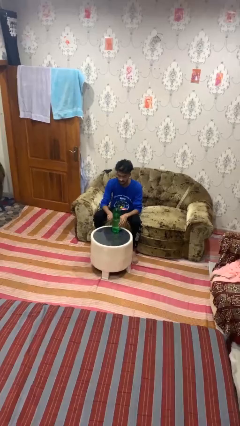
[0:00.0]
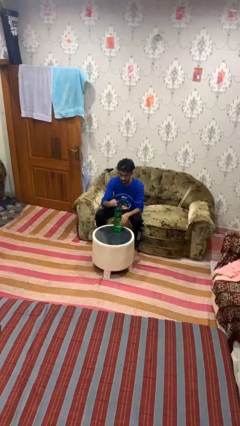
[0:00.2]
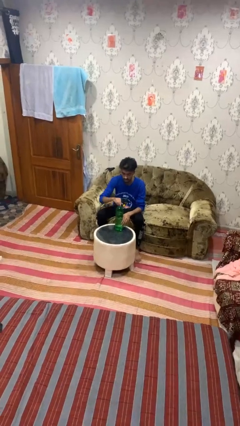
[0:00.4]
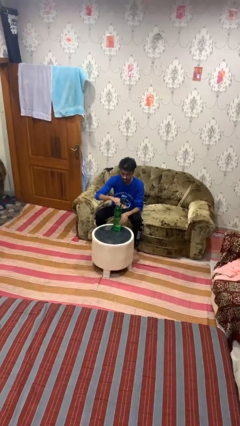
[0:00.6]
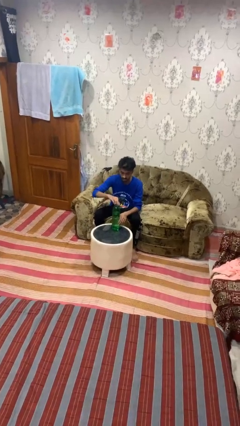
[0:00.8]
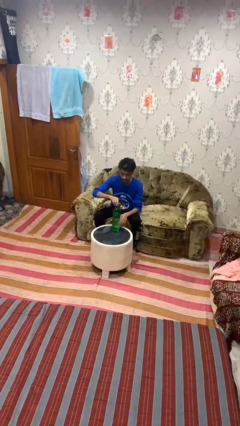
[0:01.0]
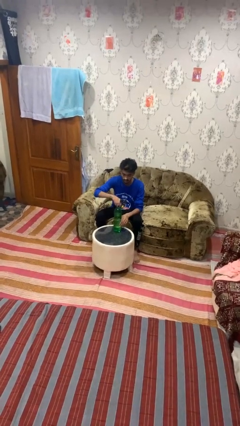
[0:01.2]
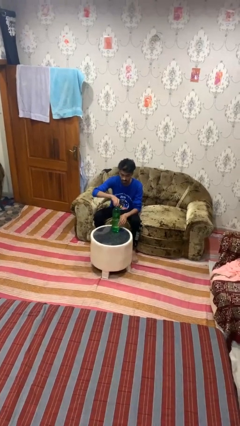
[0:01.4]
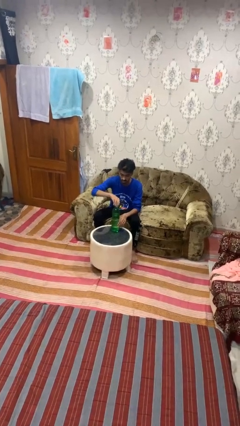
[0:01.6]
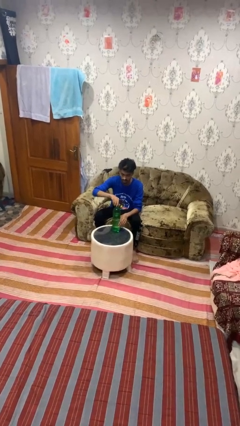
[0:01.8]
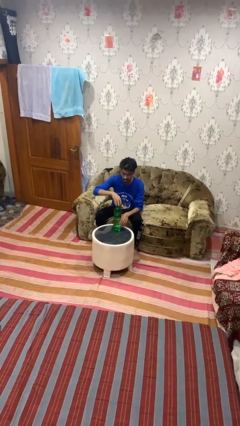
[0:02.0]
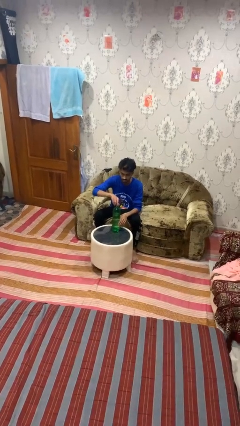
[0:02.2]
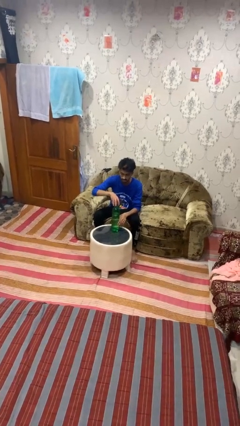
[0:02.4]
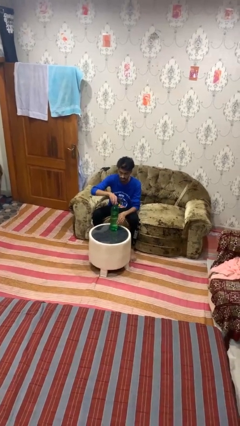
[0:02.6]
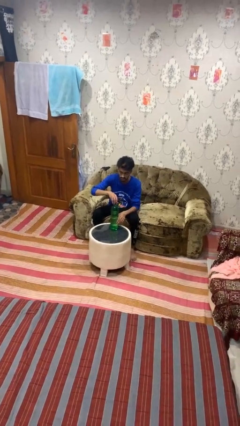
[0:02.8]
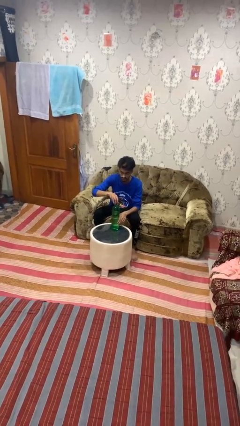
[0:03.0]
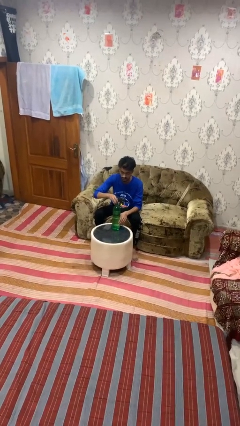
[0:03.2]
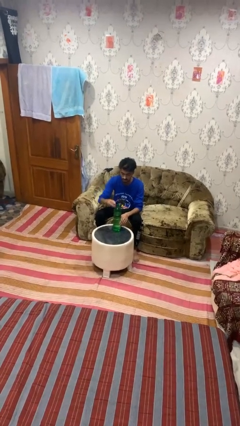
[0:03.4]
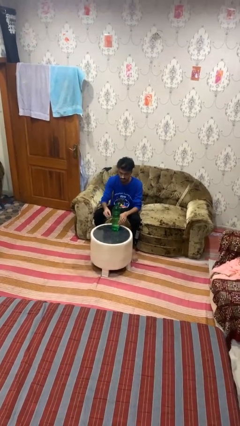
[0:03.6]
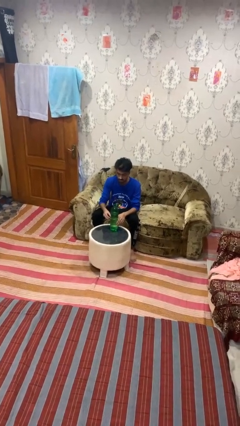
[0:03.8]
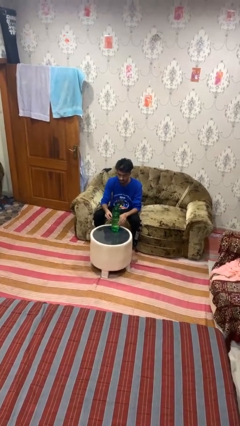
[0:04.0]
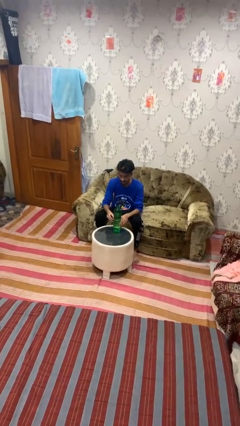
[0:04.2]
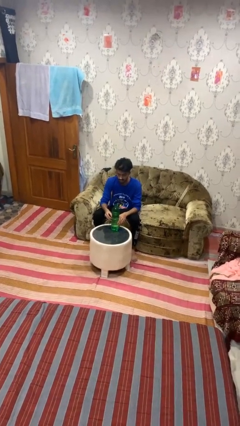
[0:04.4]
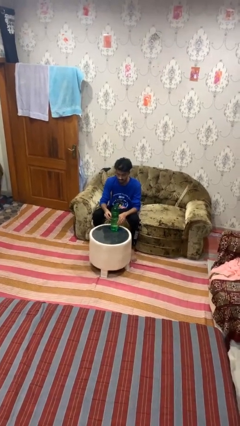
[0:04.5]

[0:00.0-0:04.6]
person unscrews lid from bottle

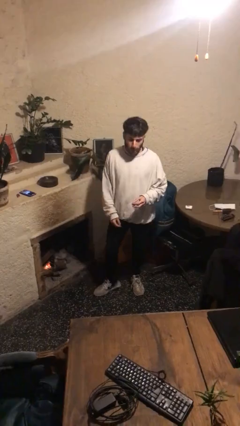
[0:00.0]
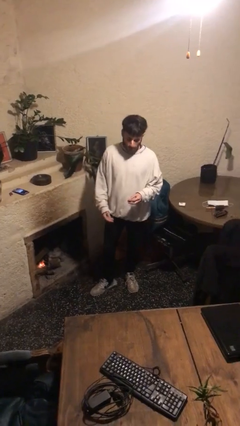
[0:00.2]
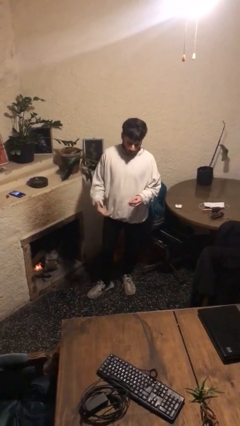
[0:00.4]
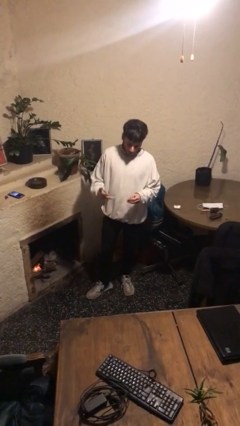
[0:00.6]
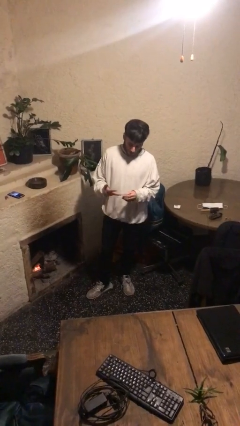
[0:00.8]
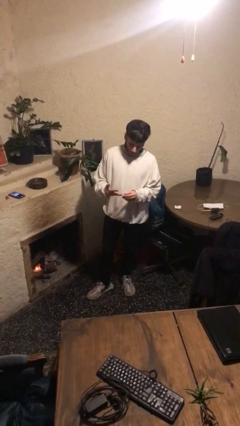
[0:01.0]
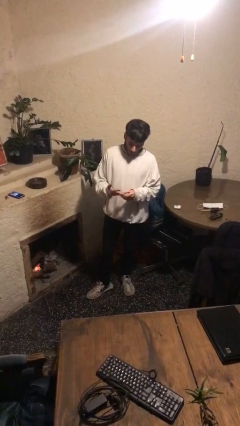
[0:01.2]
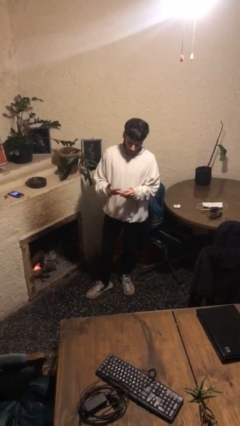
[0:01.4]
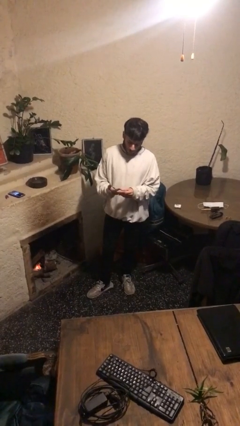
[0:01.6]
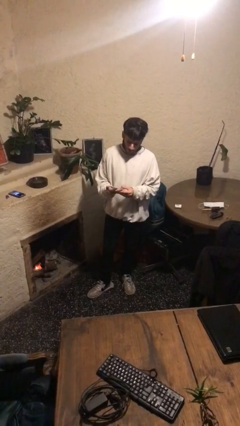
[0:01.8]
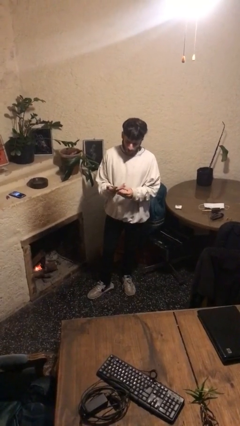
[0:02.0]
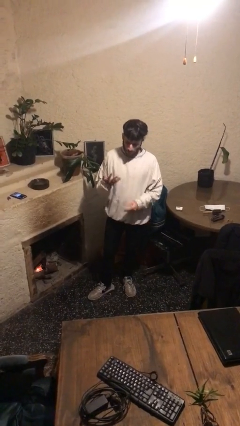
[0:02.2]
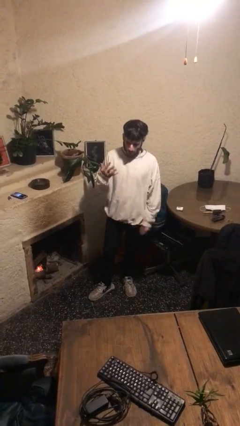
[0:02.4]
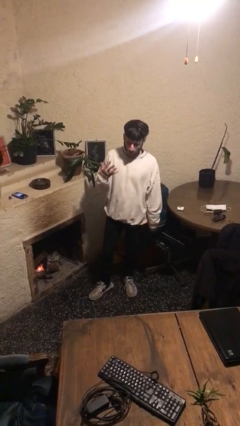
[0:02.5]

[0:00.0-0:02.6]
person puts on ring

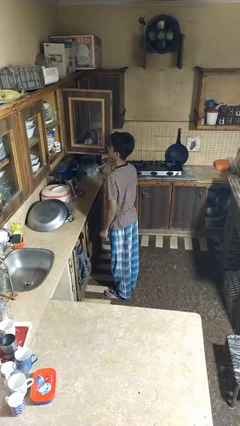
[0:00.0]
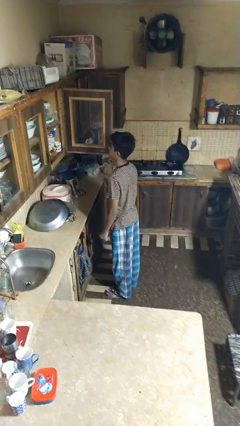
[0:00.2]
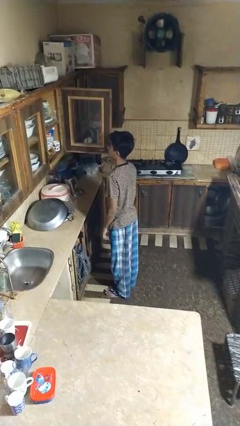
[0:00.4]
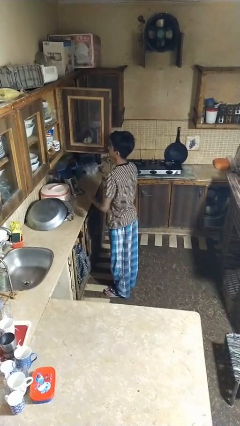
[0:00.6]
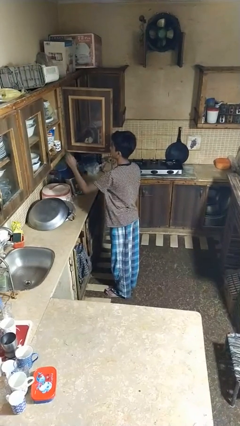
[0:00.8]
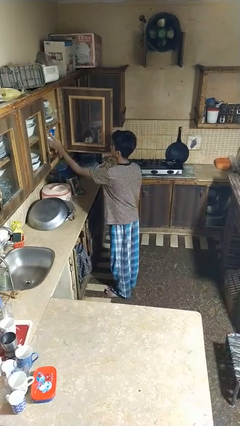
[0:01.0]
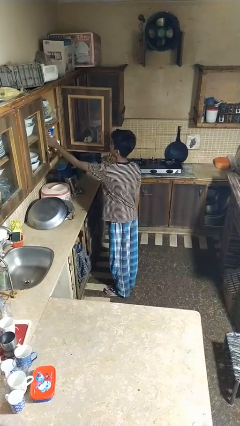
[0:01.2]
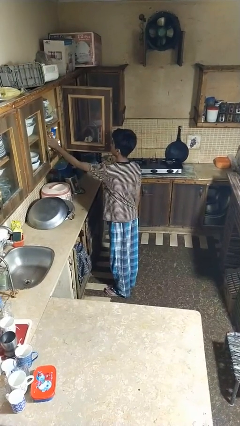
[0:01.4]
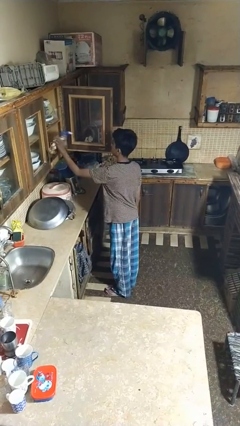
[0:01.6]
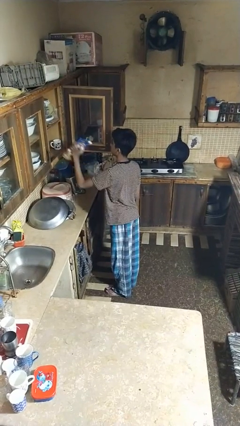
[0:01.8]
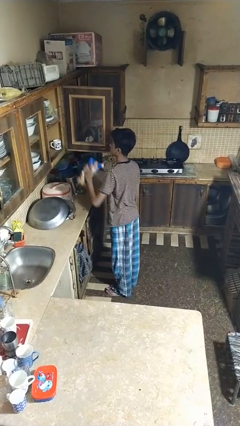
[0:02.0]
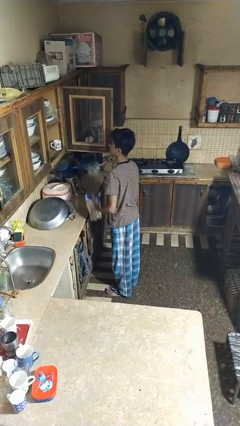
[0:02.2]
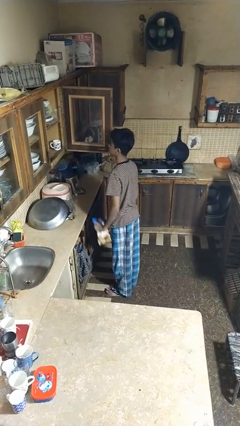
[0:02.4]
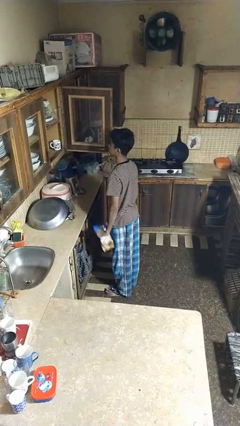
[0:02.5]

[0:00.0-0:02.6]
person takes object from cabinet

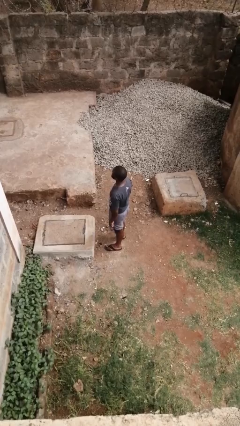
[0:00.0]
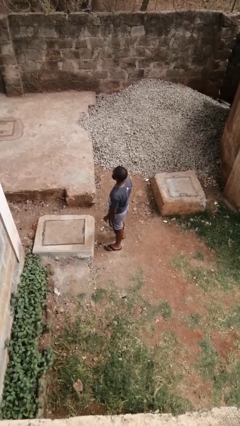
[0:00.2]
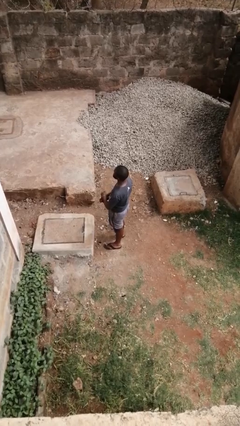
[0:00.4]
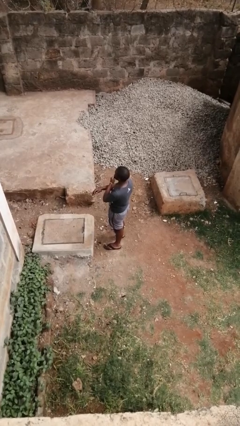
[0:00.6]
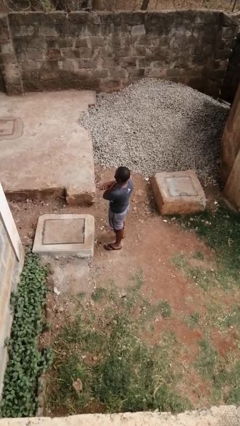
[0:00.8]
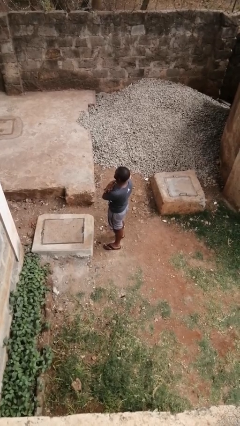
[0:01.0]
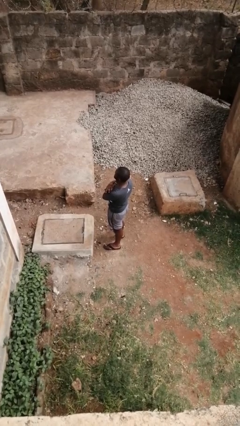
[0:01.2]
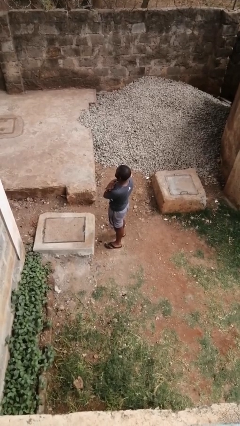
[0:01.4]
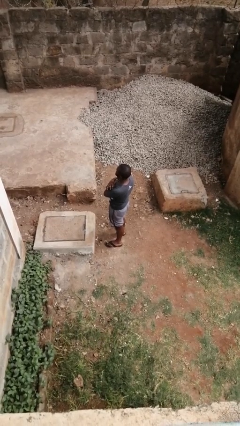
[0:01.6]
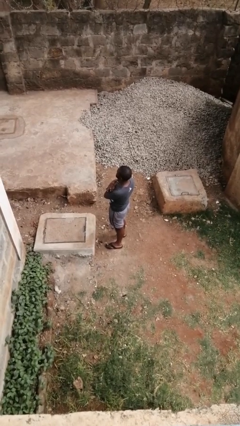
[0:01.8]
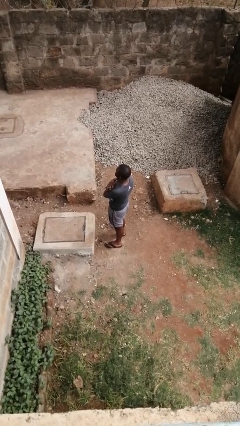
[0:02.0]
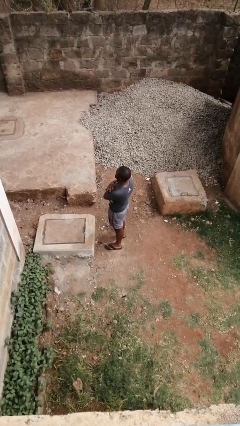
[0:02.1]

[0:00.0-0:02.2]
person gestures arms x

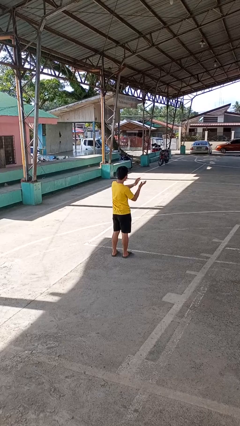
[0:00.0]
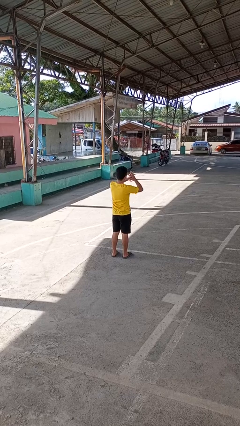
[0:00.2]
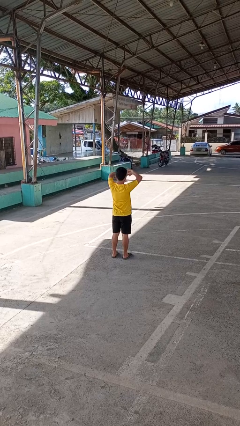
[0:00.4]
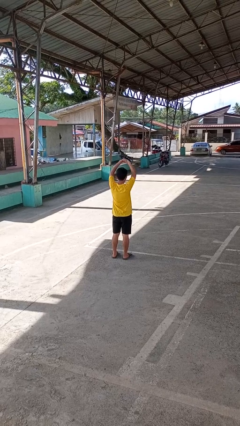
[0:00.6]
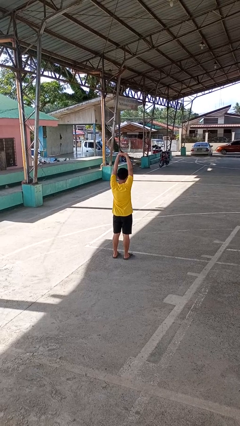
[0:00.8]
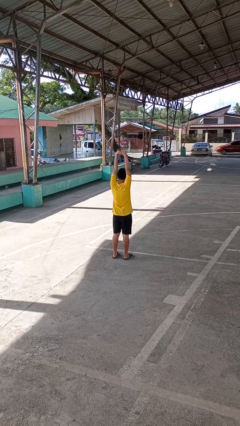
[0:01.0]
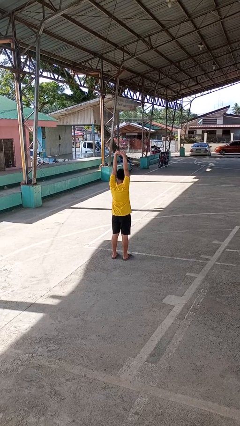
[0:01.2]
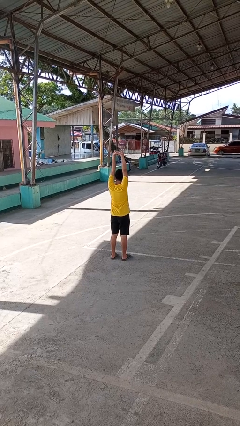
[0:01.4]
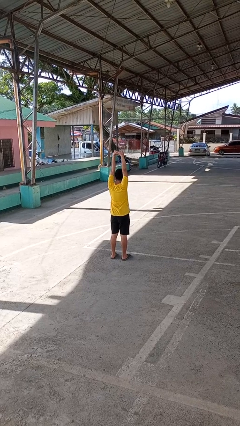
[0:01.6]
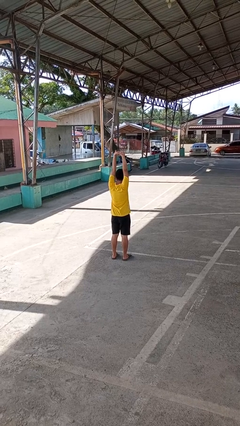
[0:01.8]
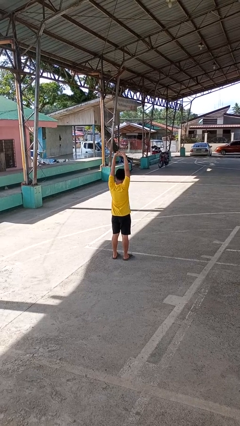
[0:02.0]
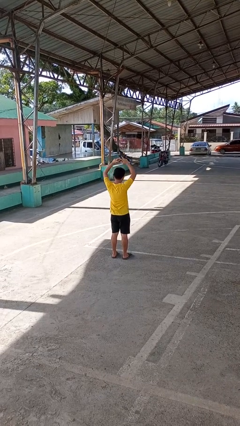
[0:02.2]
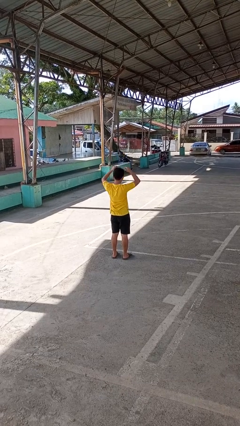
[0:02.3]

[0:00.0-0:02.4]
person stretches arms over head

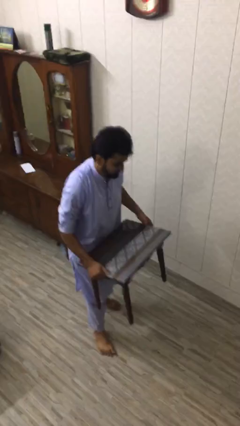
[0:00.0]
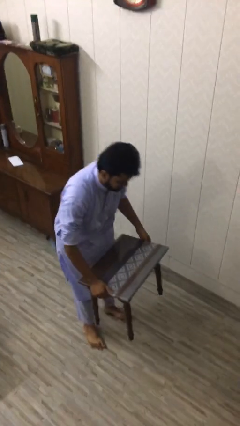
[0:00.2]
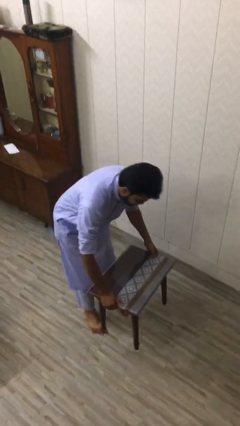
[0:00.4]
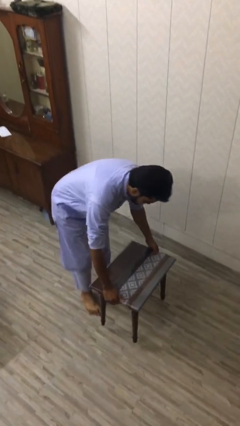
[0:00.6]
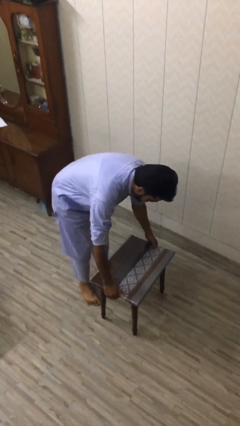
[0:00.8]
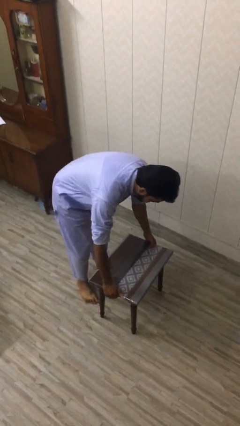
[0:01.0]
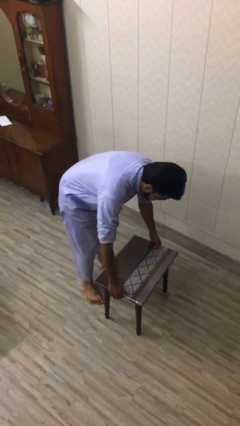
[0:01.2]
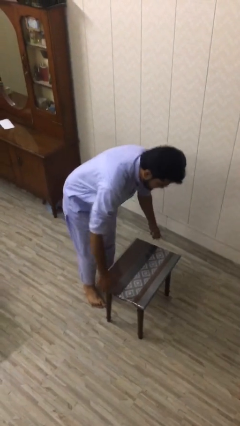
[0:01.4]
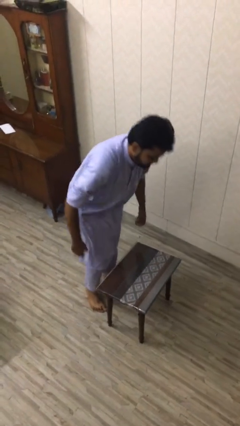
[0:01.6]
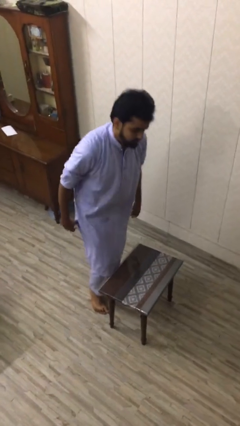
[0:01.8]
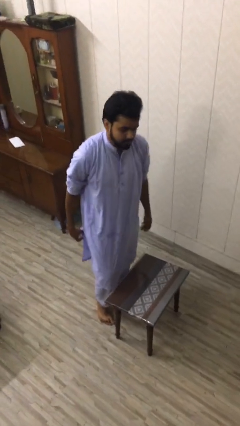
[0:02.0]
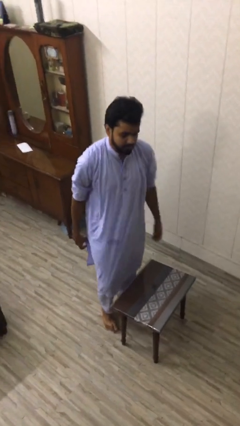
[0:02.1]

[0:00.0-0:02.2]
person puts down object on floor

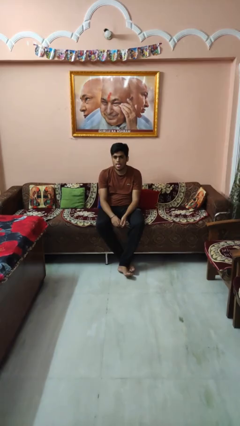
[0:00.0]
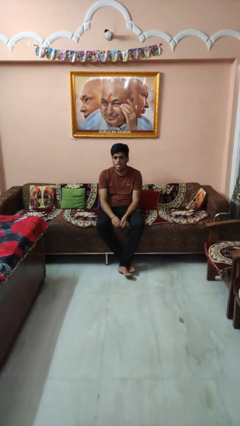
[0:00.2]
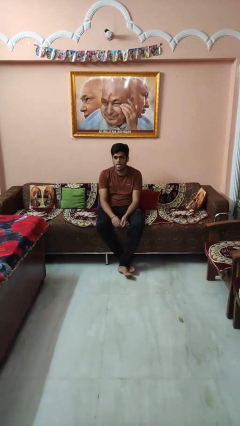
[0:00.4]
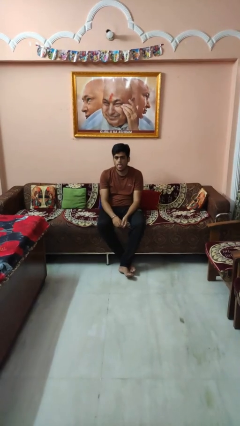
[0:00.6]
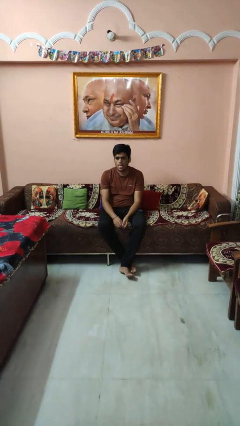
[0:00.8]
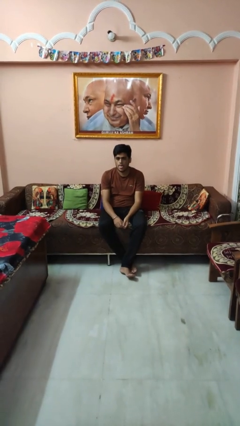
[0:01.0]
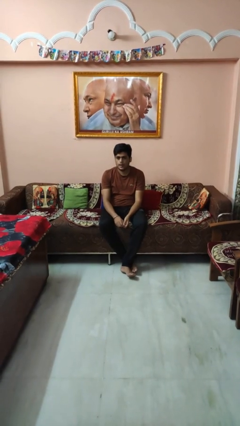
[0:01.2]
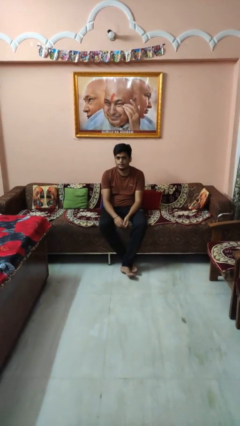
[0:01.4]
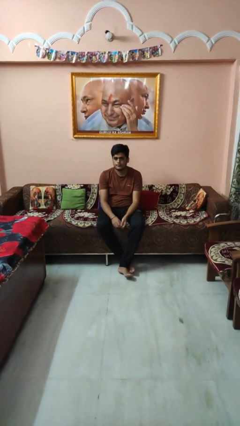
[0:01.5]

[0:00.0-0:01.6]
person sticks out tongue
